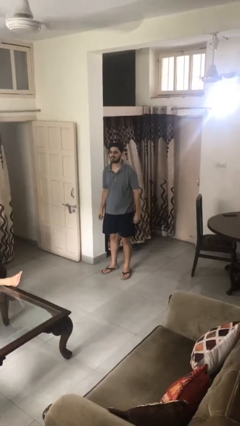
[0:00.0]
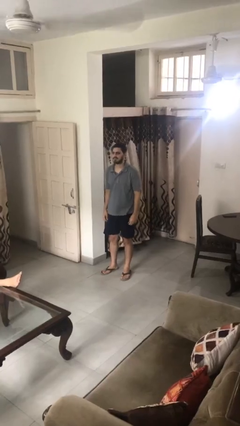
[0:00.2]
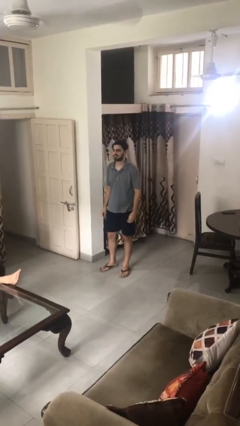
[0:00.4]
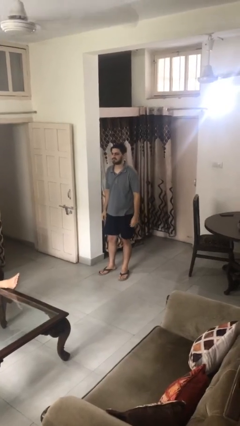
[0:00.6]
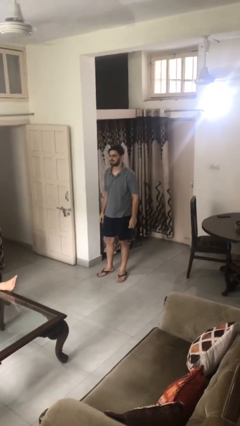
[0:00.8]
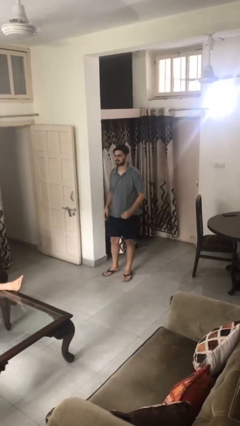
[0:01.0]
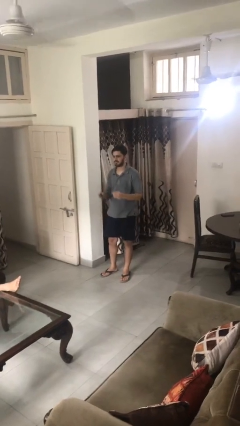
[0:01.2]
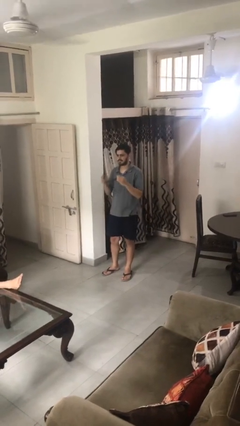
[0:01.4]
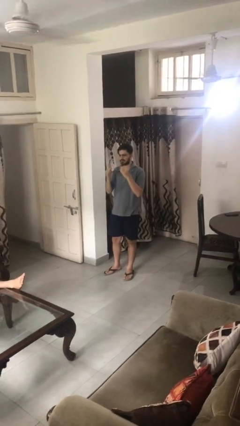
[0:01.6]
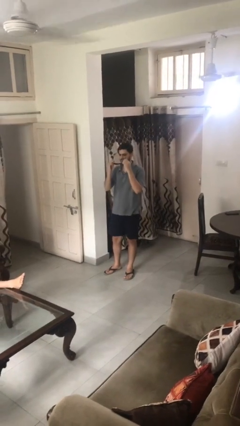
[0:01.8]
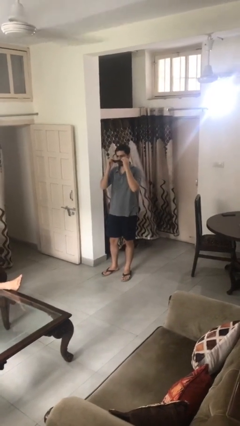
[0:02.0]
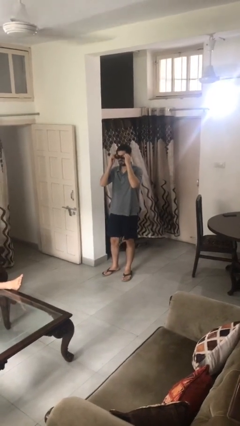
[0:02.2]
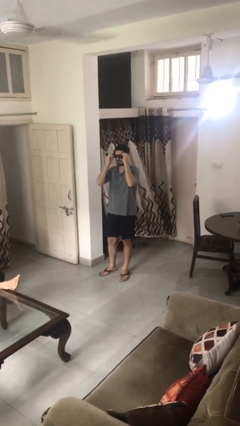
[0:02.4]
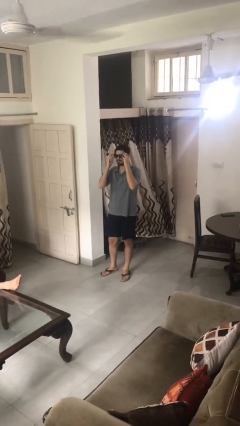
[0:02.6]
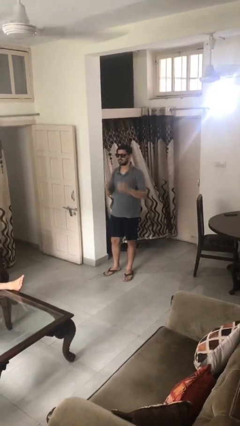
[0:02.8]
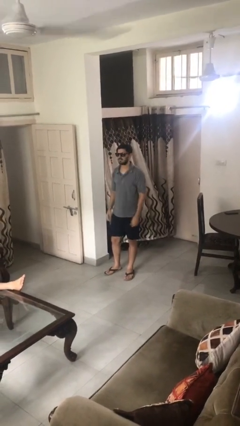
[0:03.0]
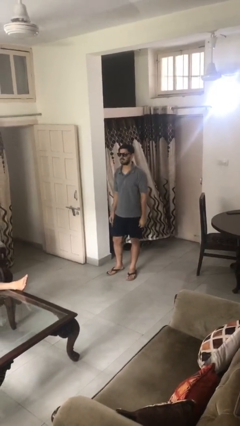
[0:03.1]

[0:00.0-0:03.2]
person puts on sunglasses

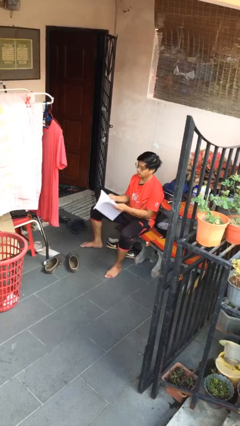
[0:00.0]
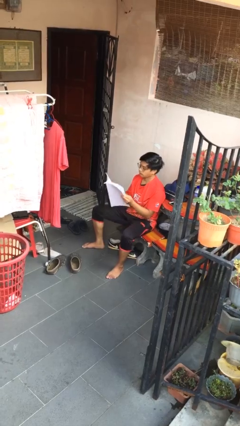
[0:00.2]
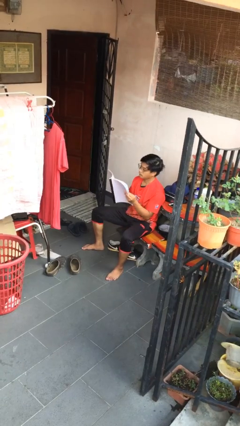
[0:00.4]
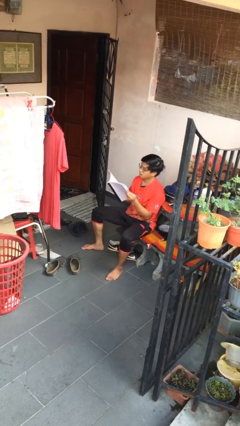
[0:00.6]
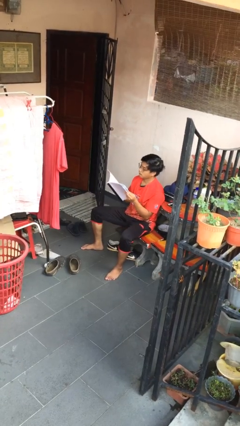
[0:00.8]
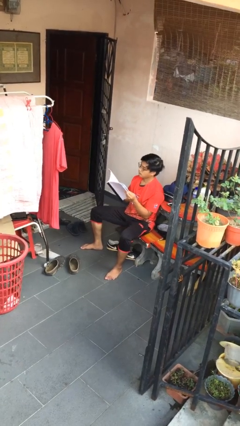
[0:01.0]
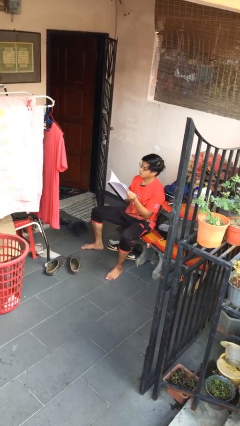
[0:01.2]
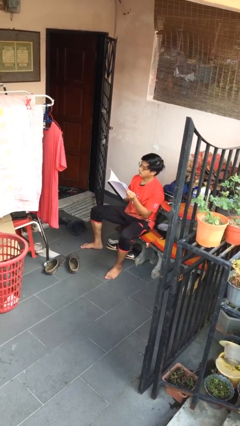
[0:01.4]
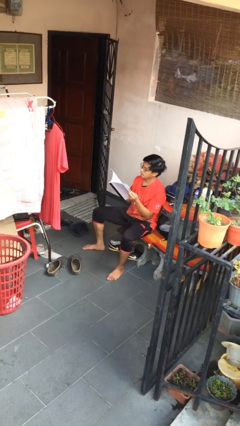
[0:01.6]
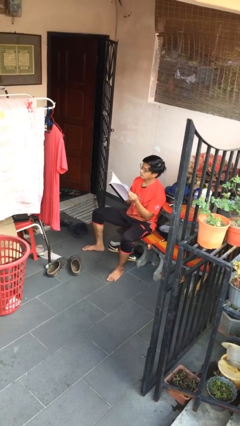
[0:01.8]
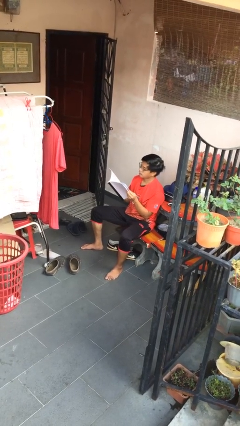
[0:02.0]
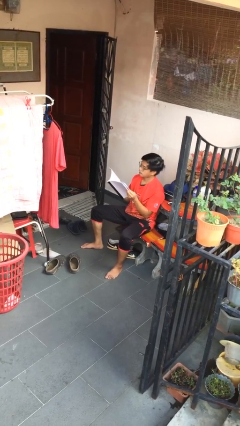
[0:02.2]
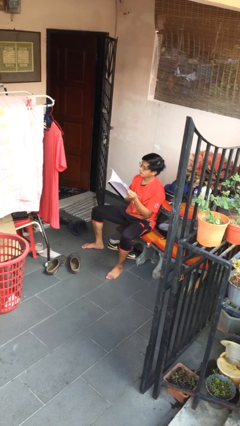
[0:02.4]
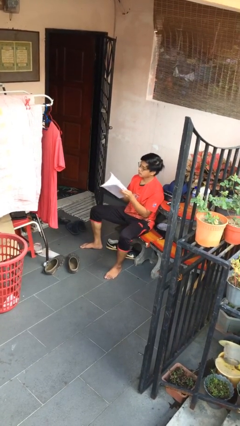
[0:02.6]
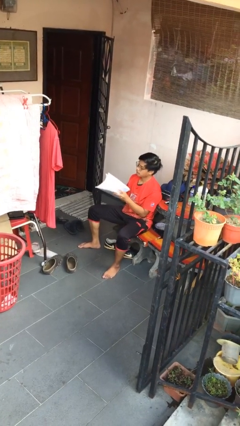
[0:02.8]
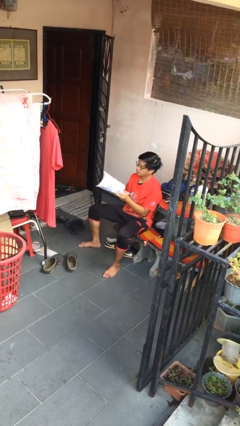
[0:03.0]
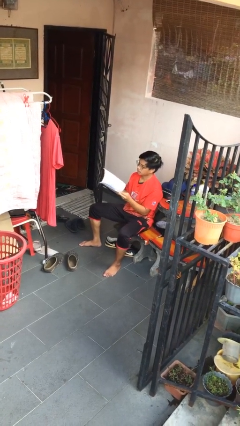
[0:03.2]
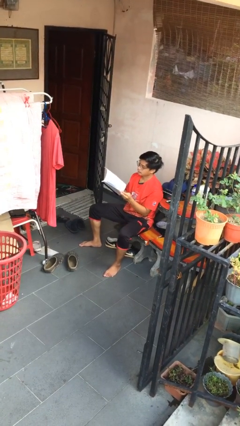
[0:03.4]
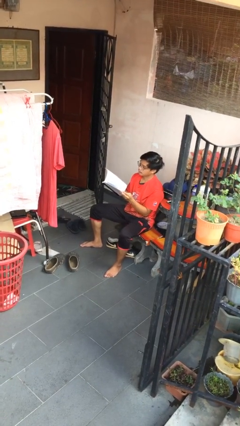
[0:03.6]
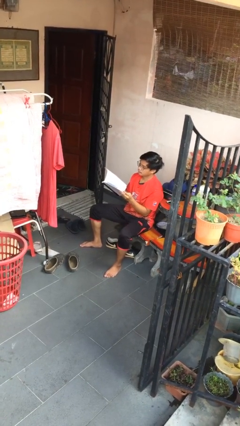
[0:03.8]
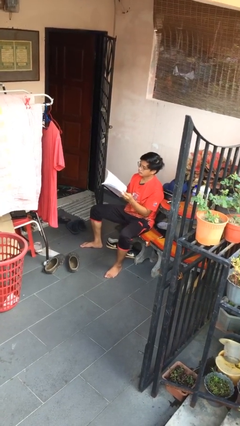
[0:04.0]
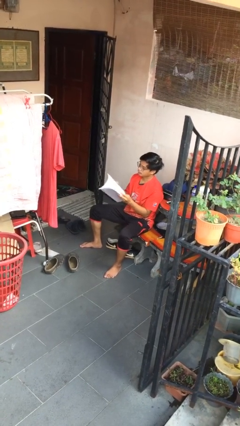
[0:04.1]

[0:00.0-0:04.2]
person reads document

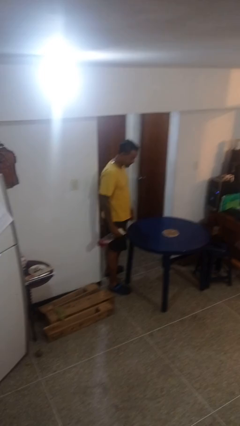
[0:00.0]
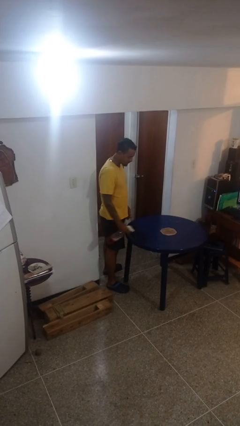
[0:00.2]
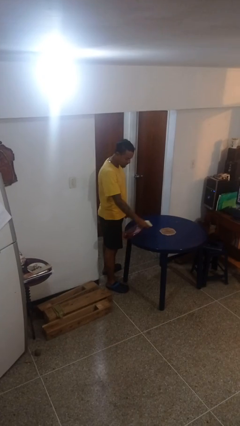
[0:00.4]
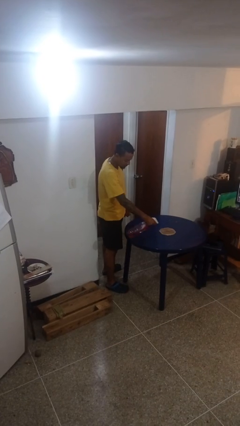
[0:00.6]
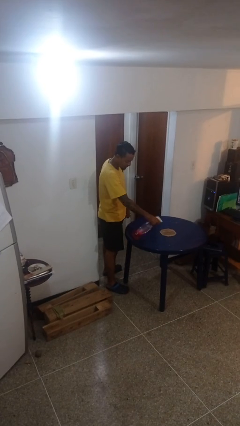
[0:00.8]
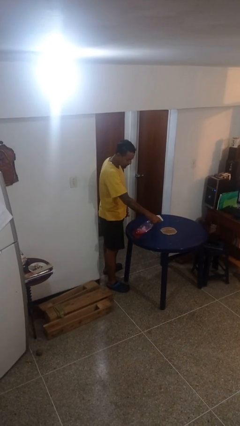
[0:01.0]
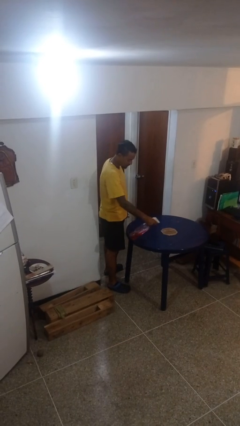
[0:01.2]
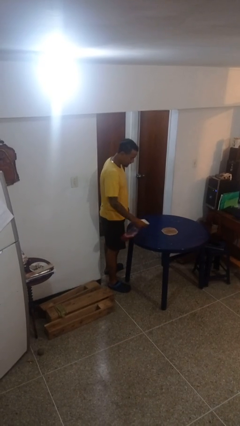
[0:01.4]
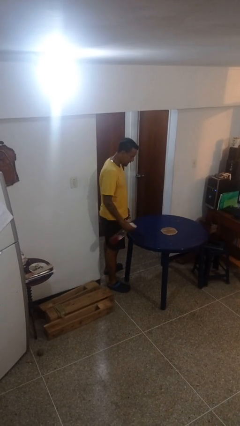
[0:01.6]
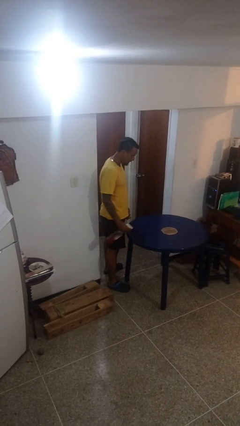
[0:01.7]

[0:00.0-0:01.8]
person sprays from bottle

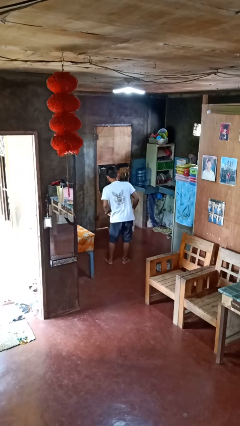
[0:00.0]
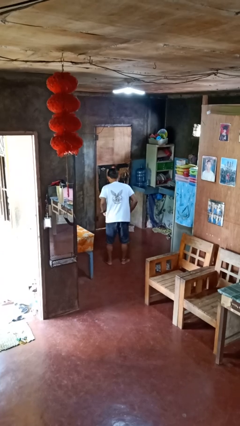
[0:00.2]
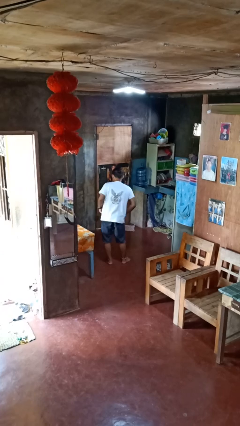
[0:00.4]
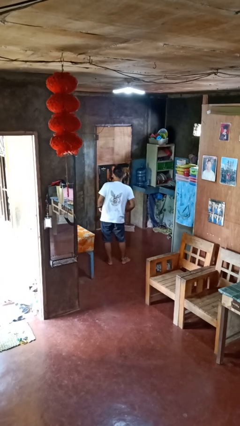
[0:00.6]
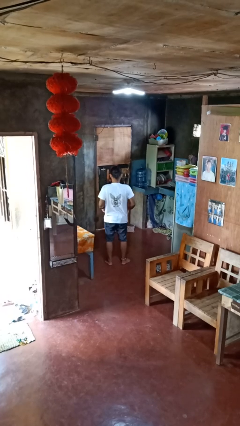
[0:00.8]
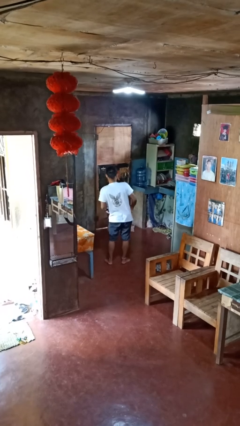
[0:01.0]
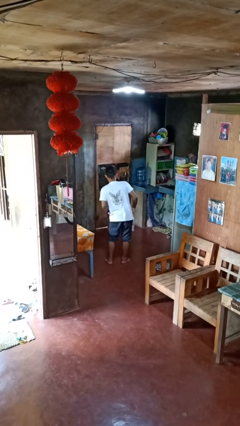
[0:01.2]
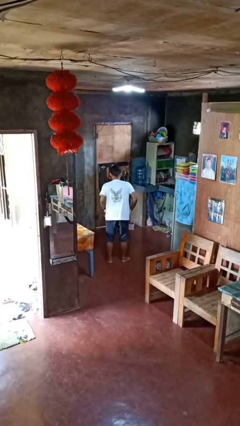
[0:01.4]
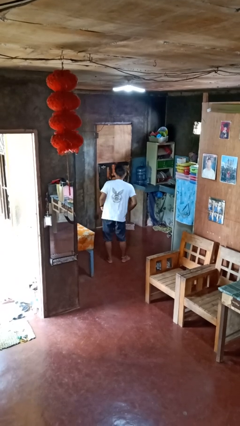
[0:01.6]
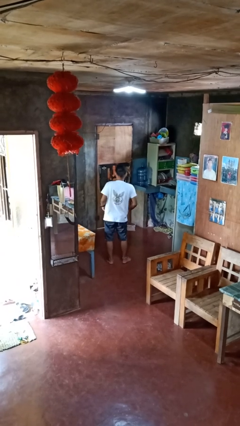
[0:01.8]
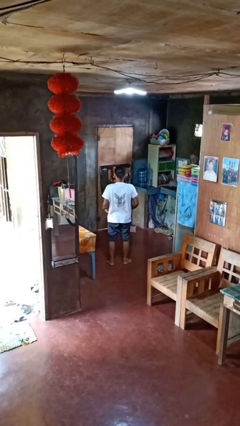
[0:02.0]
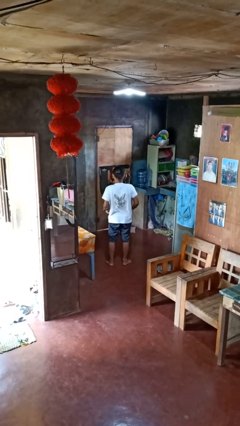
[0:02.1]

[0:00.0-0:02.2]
person wiggles hips

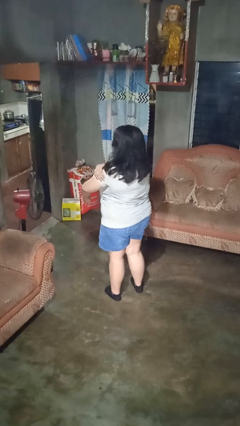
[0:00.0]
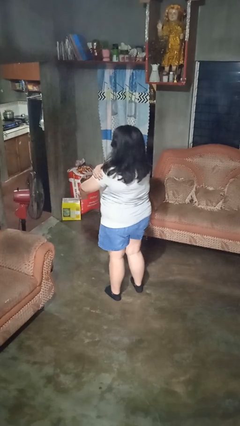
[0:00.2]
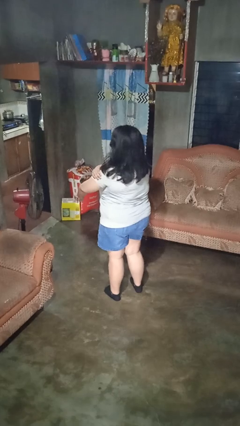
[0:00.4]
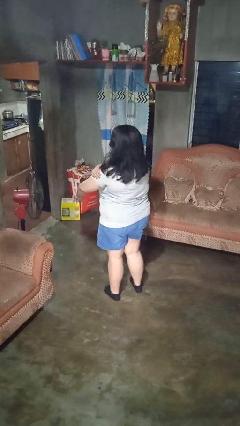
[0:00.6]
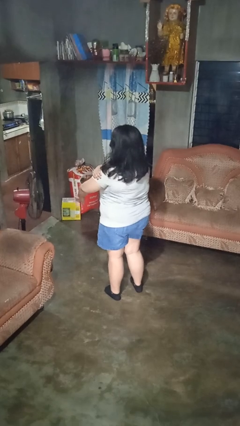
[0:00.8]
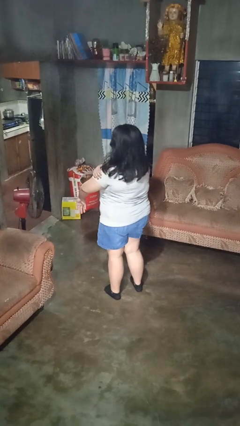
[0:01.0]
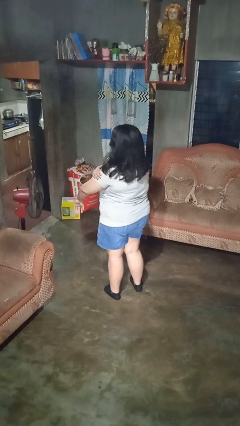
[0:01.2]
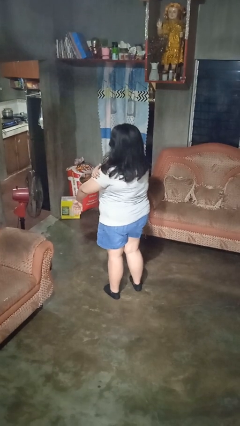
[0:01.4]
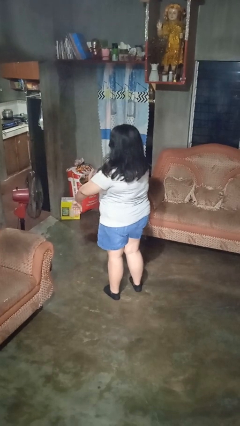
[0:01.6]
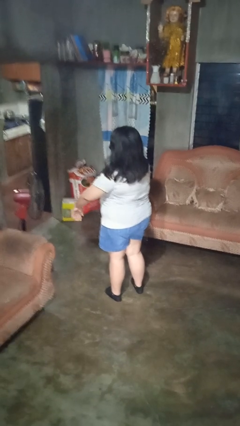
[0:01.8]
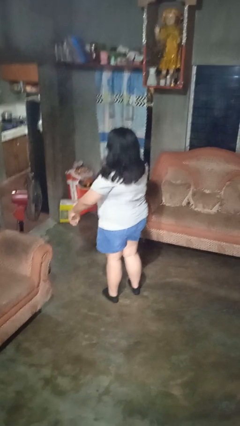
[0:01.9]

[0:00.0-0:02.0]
person swats bug

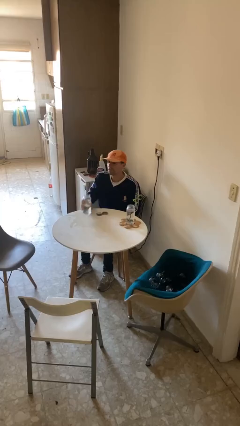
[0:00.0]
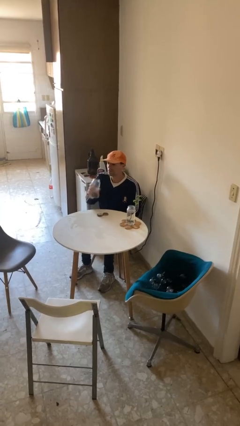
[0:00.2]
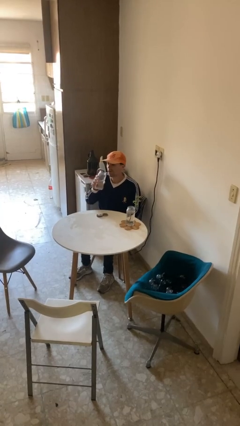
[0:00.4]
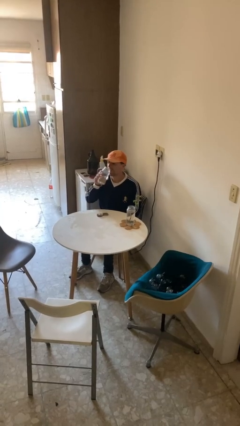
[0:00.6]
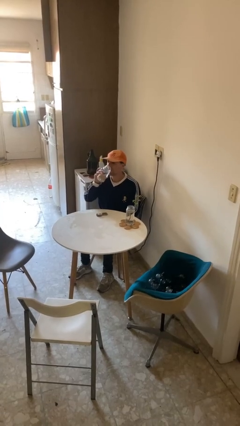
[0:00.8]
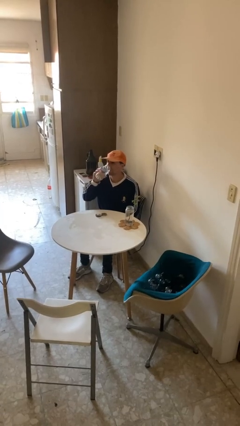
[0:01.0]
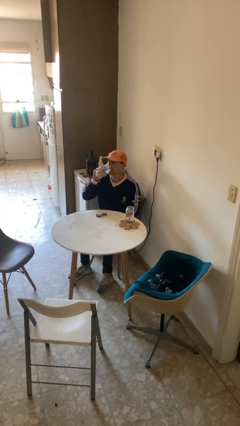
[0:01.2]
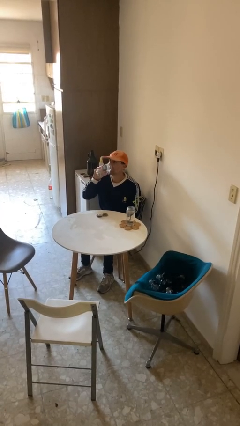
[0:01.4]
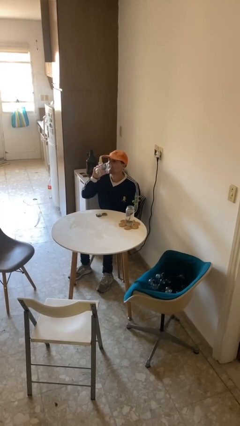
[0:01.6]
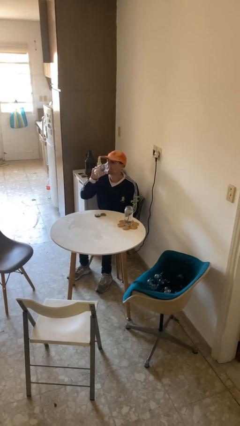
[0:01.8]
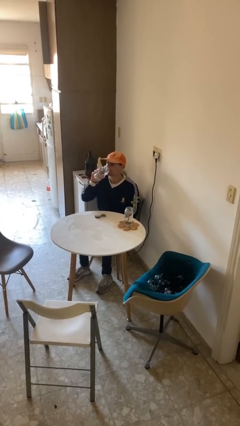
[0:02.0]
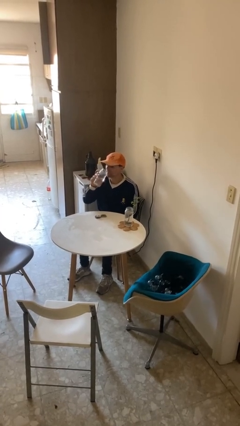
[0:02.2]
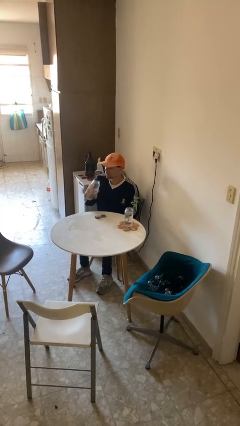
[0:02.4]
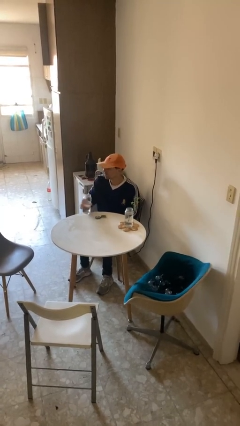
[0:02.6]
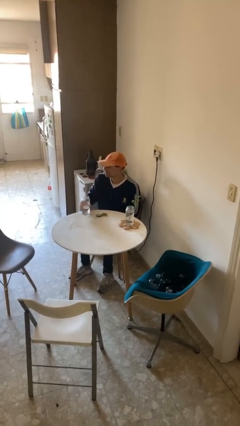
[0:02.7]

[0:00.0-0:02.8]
person drinks from cup

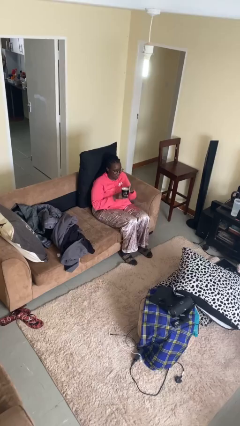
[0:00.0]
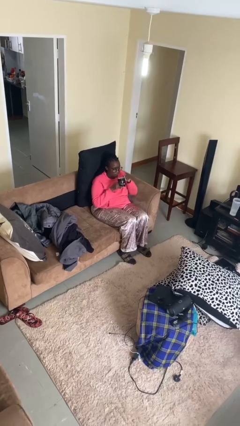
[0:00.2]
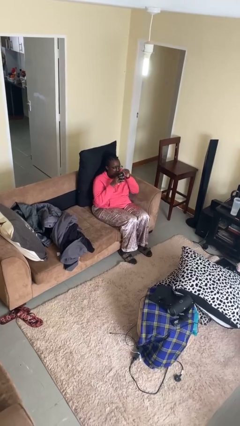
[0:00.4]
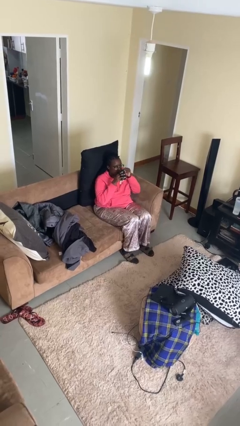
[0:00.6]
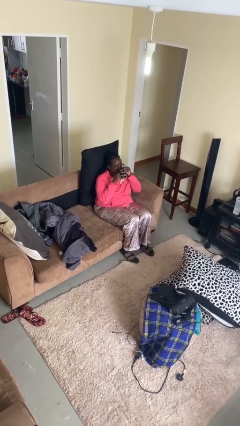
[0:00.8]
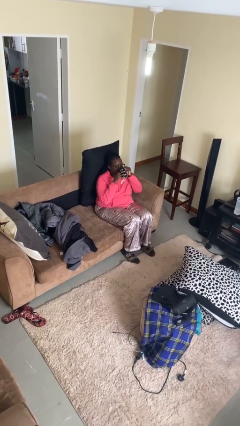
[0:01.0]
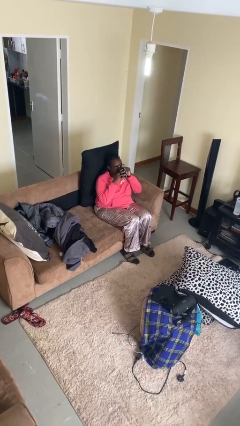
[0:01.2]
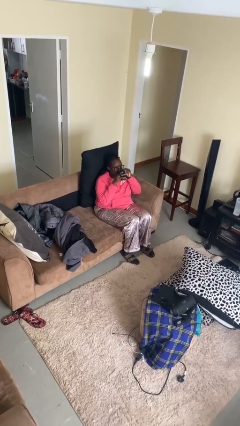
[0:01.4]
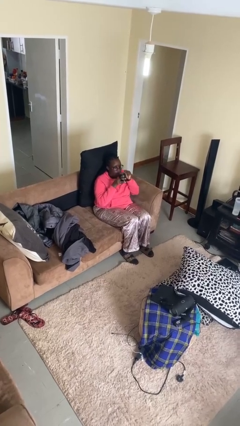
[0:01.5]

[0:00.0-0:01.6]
person drinks from mug
